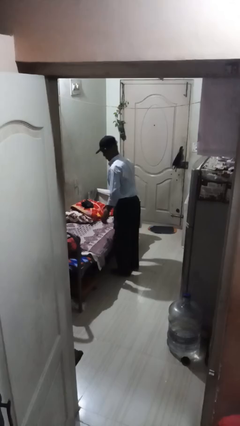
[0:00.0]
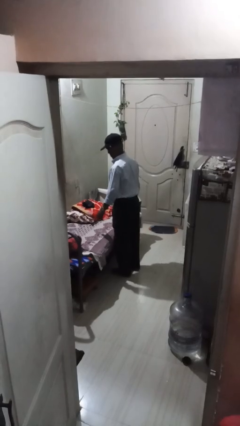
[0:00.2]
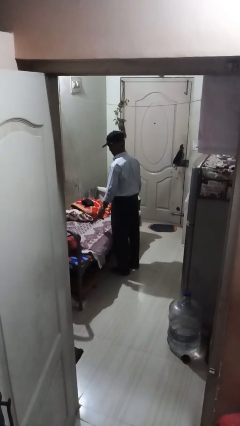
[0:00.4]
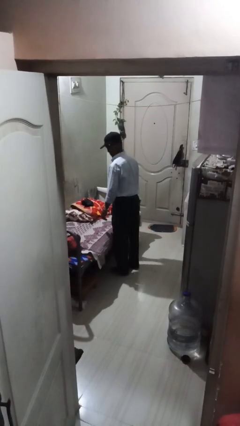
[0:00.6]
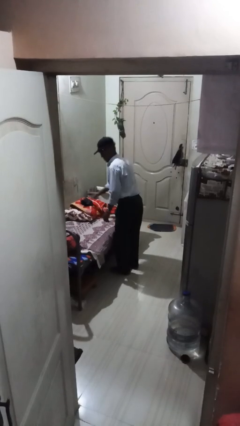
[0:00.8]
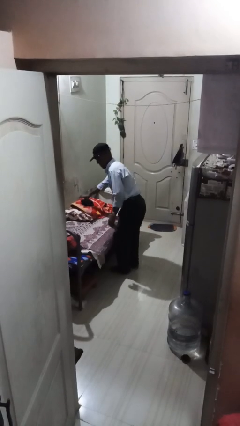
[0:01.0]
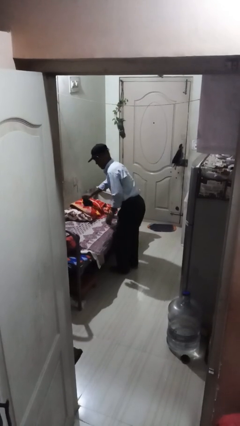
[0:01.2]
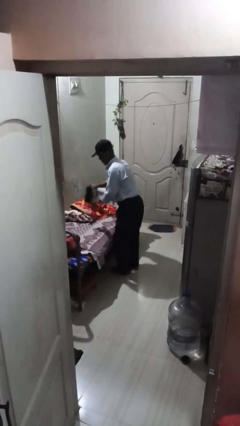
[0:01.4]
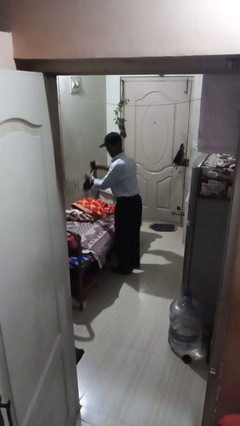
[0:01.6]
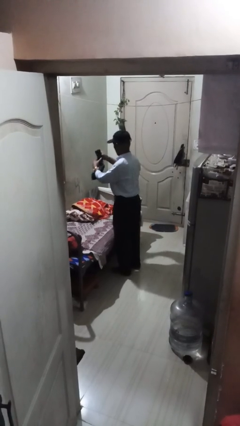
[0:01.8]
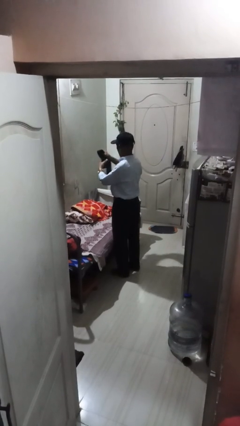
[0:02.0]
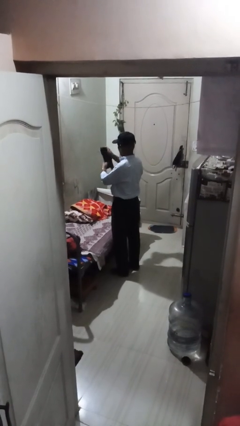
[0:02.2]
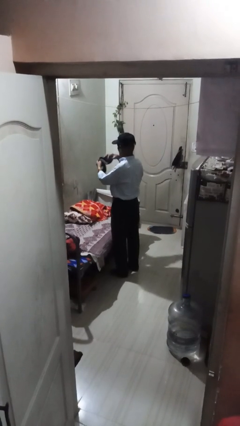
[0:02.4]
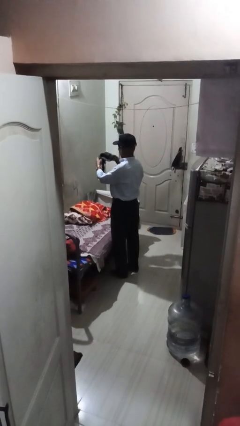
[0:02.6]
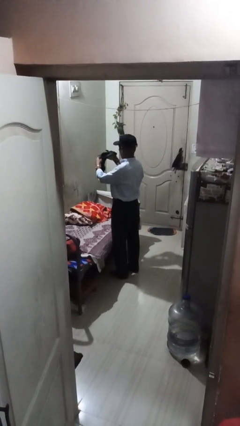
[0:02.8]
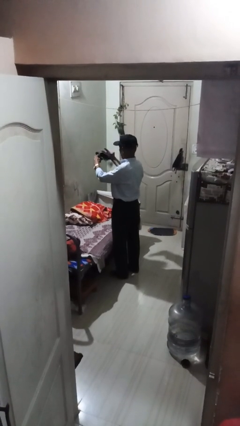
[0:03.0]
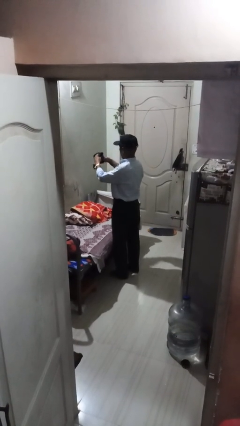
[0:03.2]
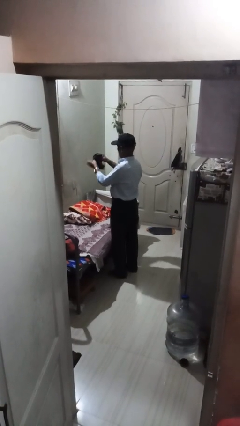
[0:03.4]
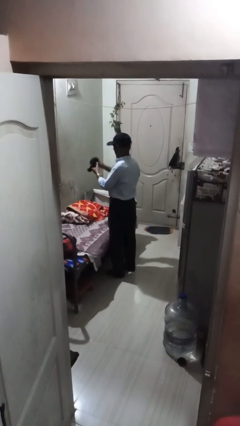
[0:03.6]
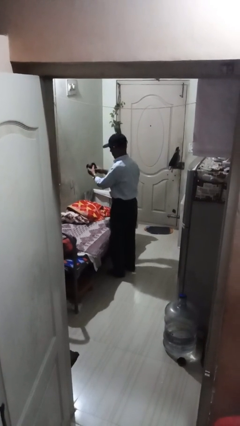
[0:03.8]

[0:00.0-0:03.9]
person folds socks

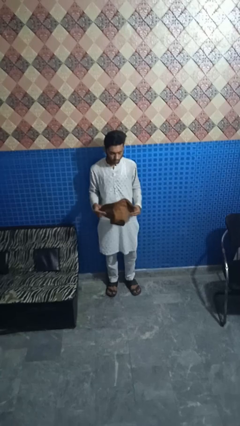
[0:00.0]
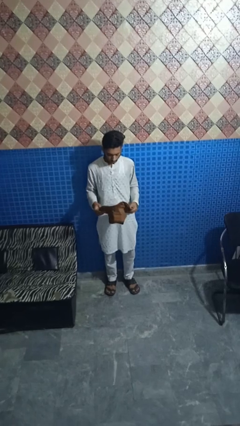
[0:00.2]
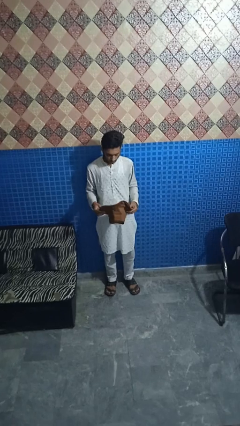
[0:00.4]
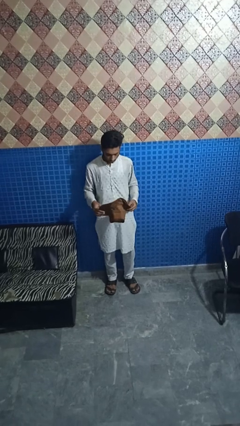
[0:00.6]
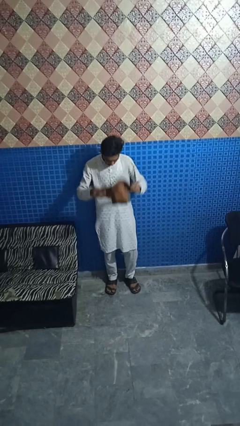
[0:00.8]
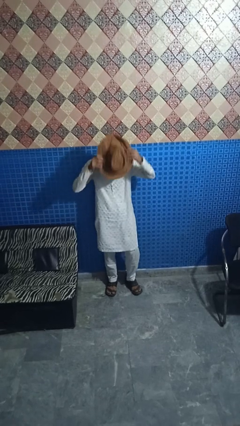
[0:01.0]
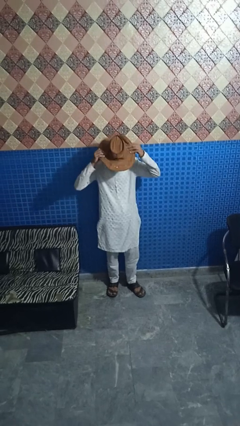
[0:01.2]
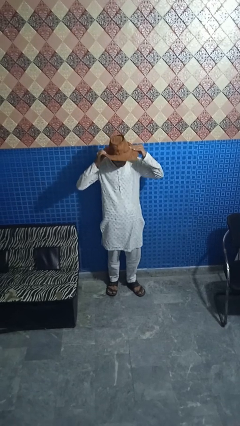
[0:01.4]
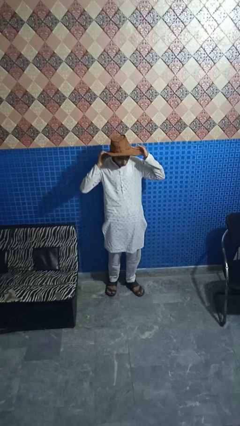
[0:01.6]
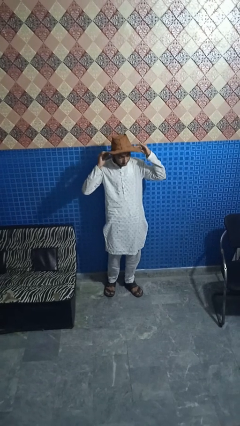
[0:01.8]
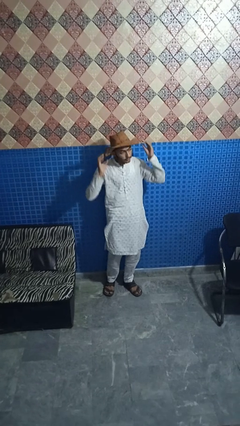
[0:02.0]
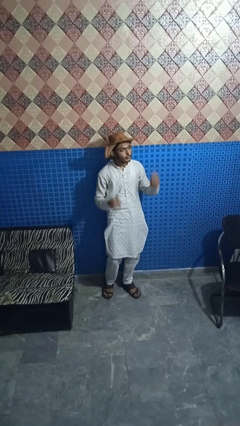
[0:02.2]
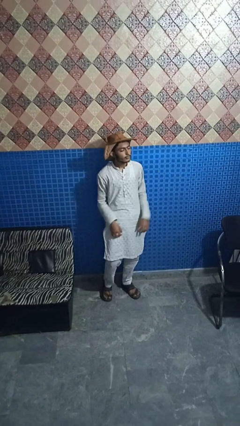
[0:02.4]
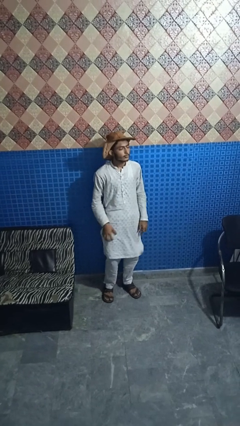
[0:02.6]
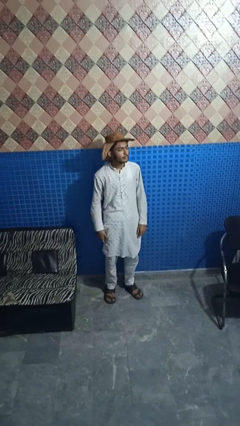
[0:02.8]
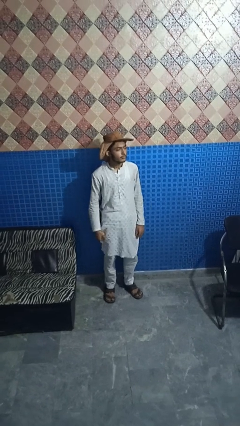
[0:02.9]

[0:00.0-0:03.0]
person puts on hat

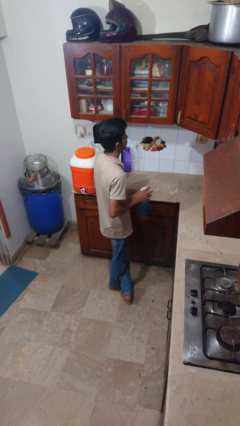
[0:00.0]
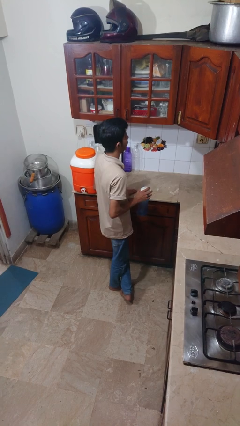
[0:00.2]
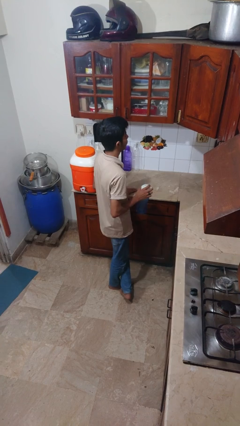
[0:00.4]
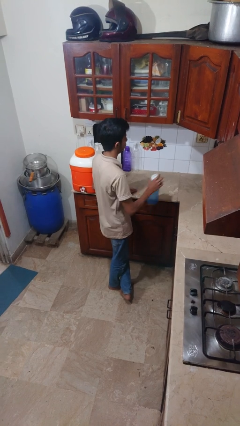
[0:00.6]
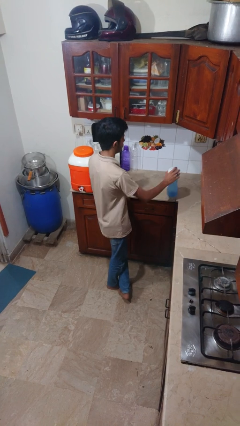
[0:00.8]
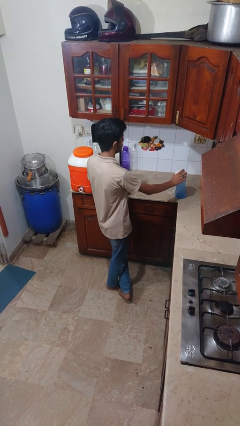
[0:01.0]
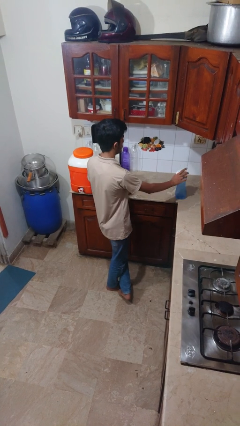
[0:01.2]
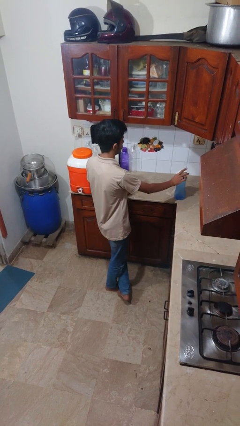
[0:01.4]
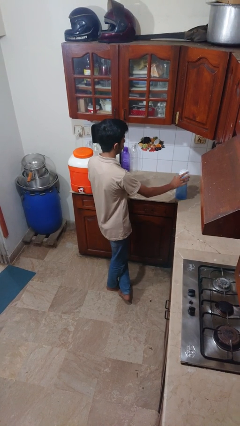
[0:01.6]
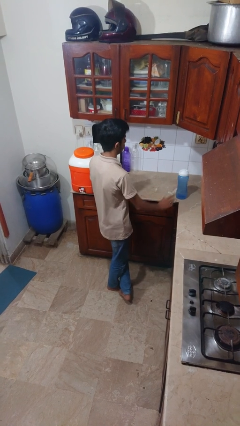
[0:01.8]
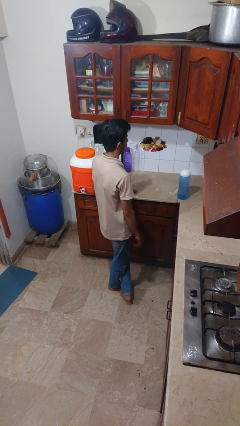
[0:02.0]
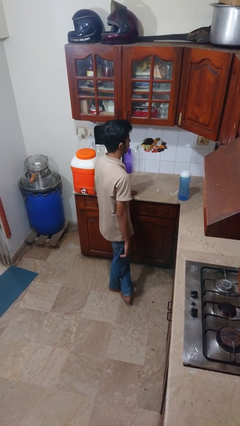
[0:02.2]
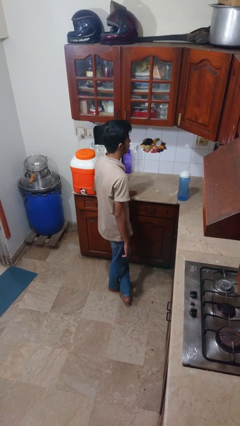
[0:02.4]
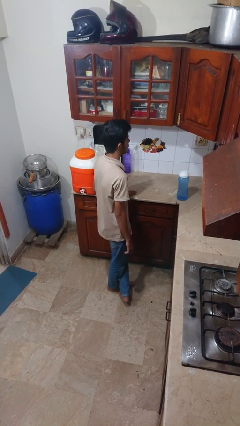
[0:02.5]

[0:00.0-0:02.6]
person puts down object on countertop

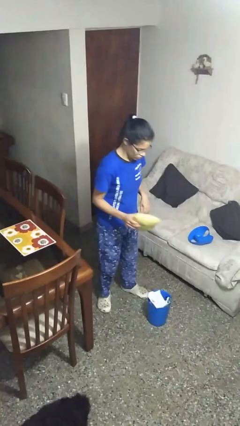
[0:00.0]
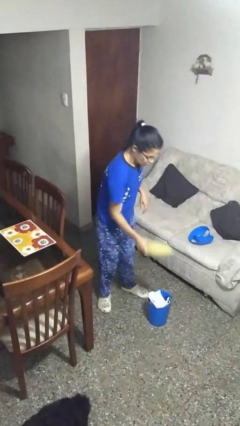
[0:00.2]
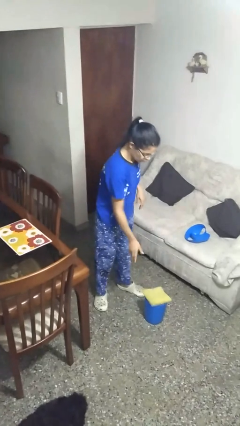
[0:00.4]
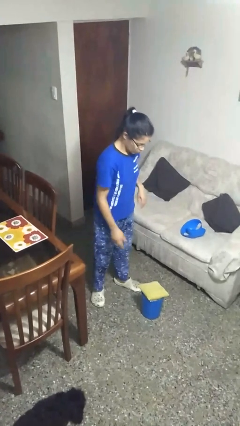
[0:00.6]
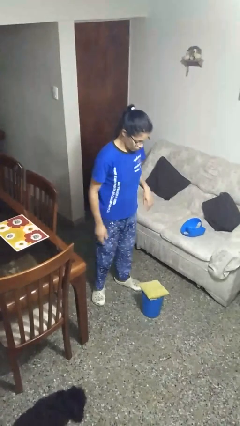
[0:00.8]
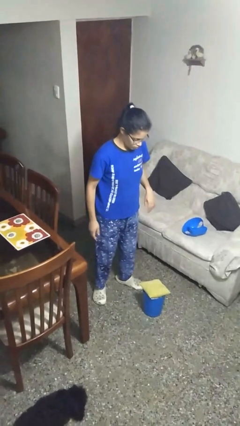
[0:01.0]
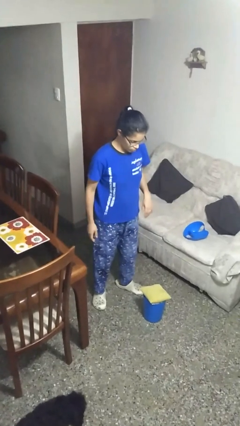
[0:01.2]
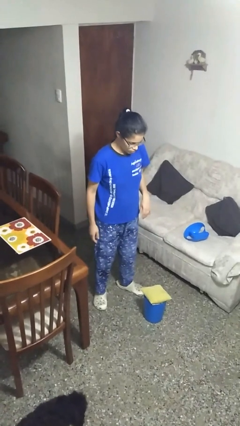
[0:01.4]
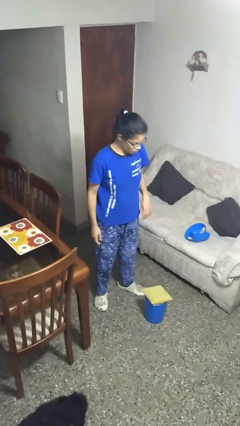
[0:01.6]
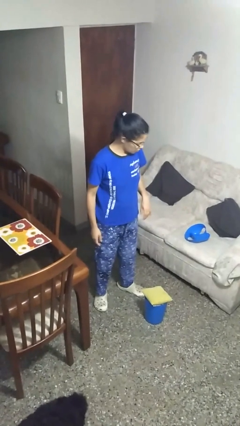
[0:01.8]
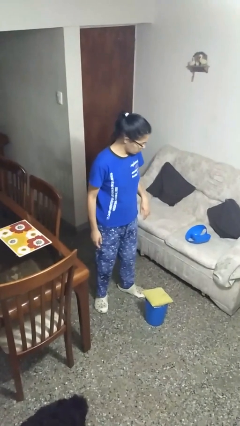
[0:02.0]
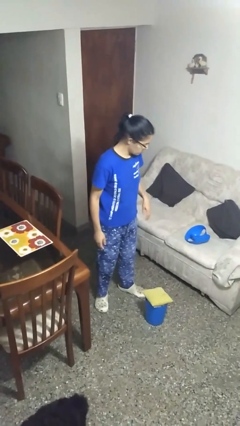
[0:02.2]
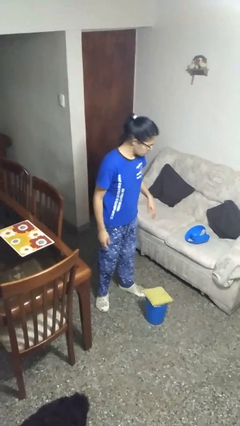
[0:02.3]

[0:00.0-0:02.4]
person discards trash

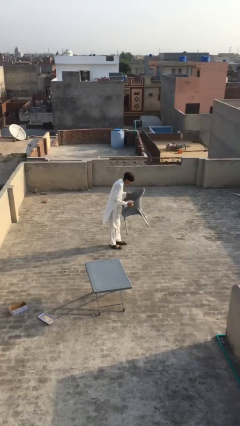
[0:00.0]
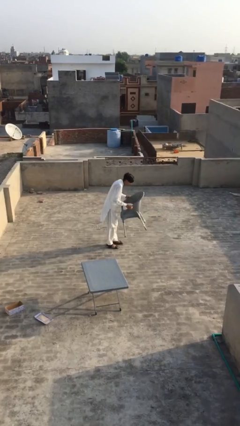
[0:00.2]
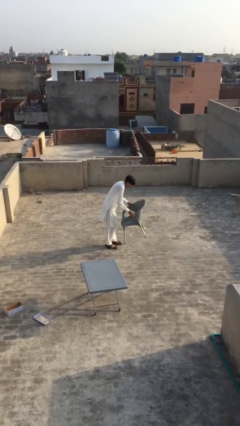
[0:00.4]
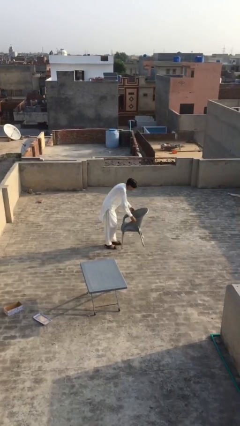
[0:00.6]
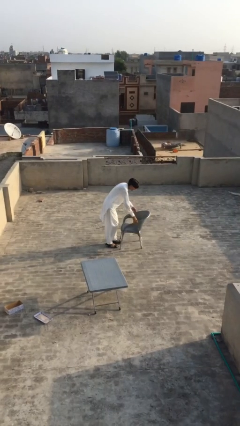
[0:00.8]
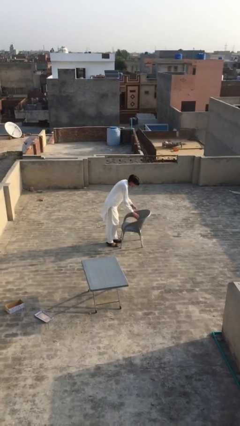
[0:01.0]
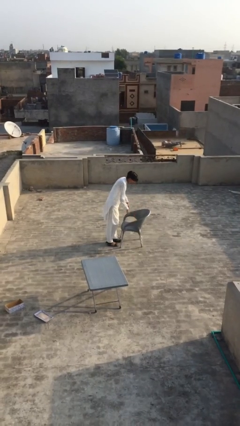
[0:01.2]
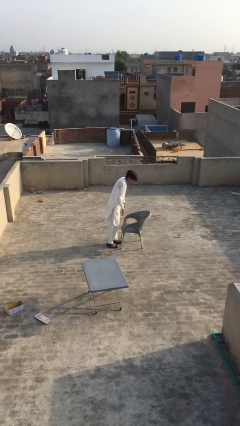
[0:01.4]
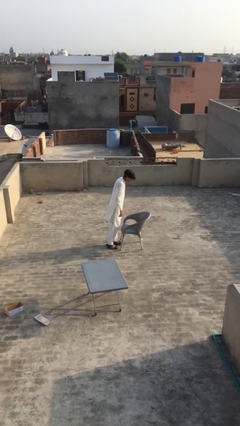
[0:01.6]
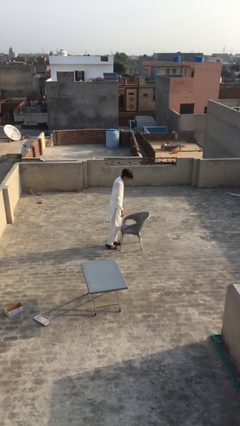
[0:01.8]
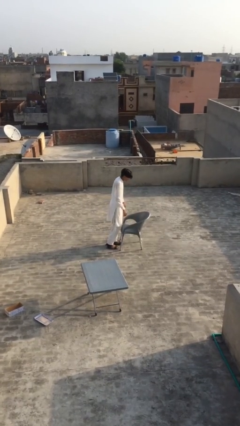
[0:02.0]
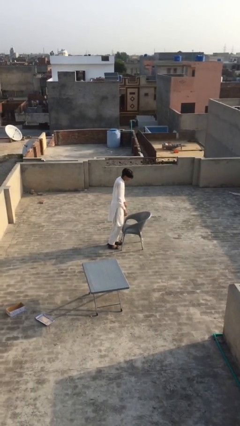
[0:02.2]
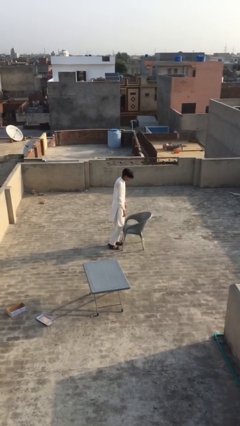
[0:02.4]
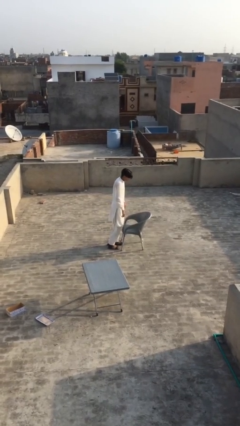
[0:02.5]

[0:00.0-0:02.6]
person puts down object on floor

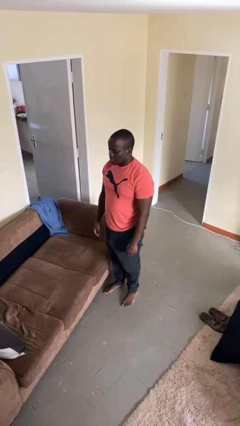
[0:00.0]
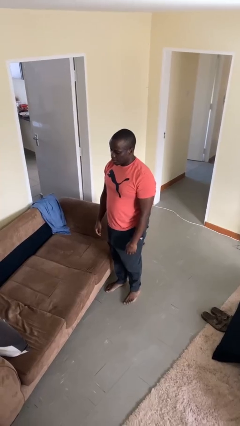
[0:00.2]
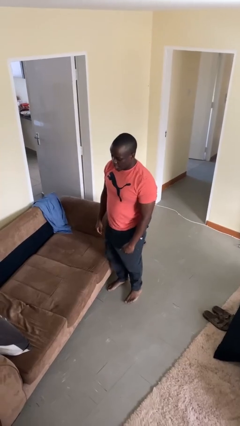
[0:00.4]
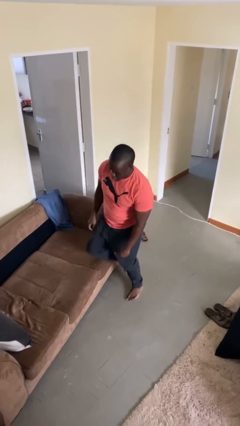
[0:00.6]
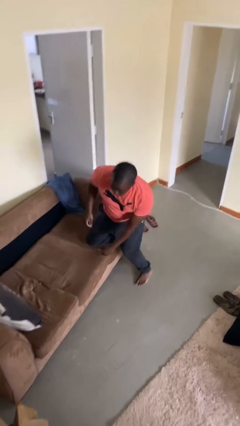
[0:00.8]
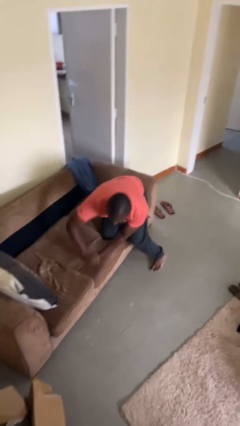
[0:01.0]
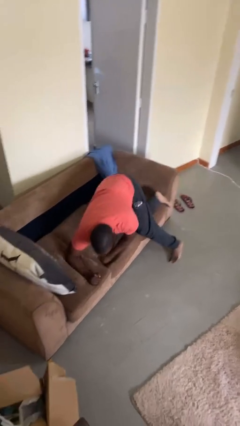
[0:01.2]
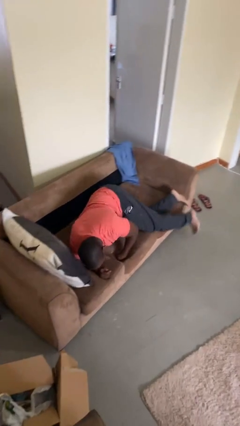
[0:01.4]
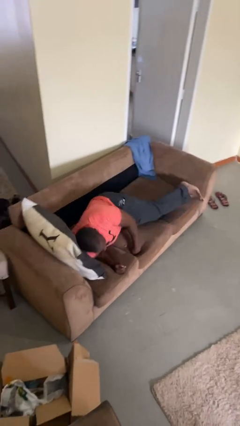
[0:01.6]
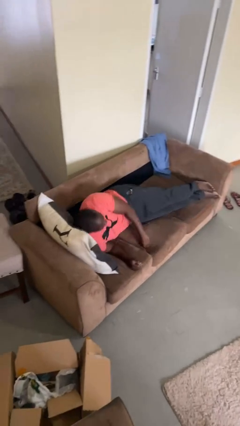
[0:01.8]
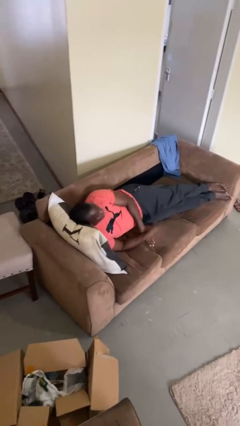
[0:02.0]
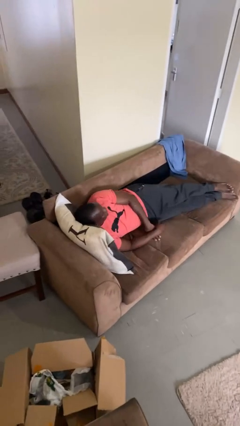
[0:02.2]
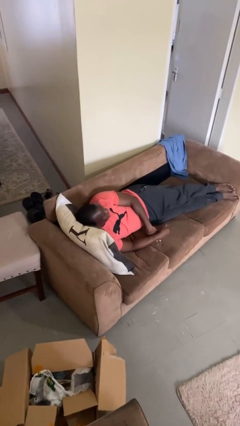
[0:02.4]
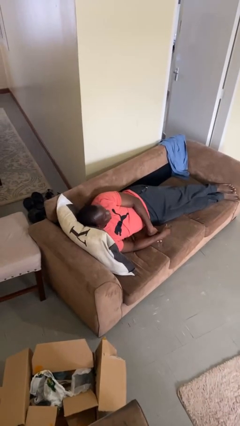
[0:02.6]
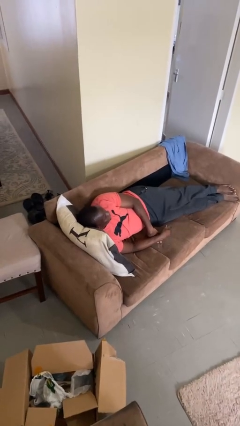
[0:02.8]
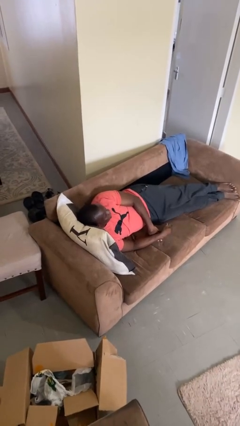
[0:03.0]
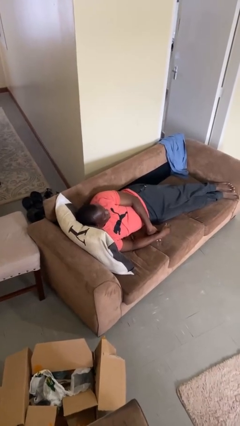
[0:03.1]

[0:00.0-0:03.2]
person lies down on couch
